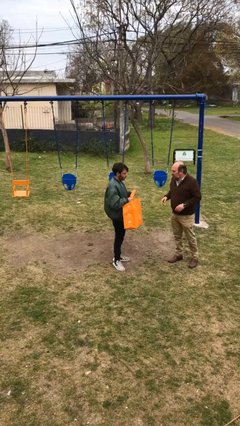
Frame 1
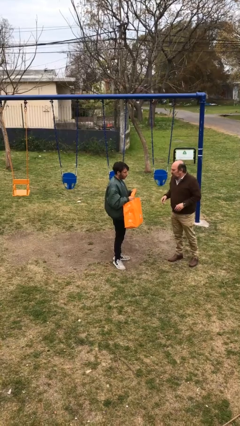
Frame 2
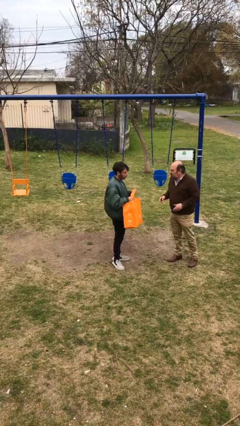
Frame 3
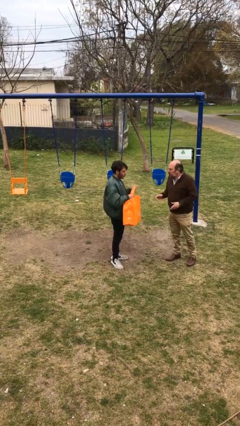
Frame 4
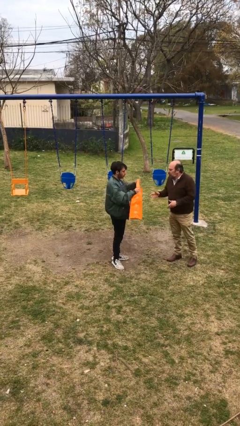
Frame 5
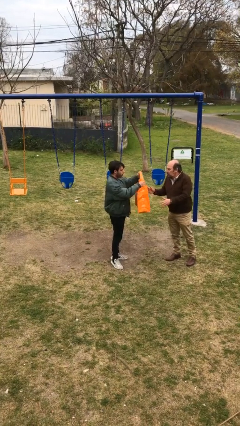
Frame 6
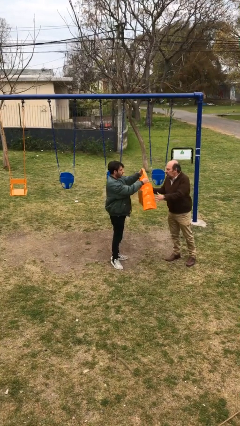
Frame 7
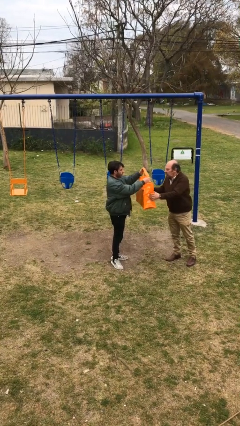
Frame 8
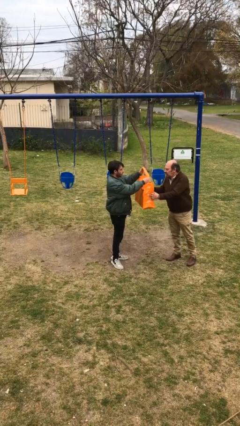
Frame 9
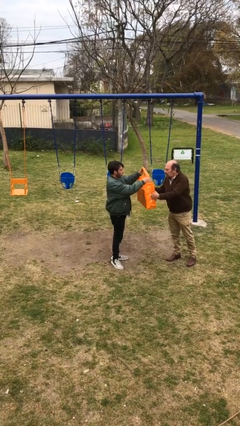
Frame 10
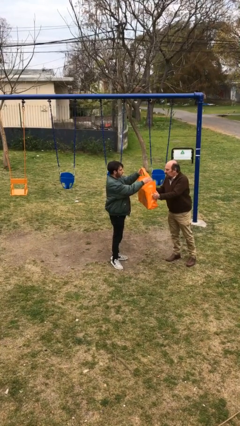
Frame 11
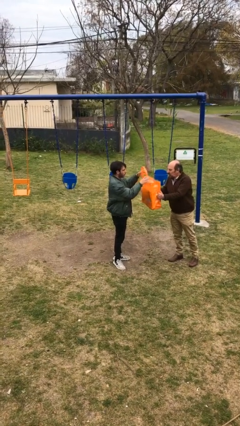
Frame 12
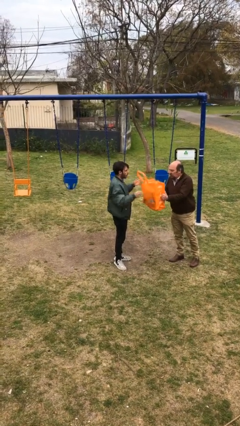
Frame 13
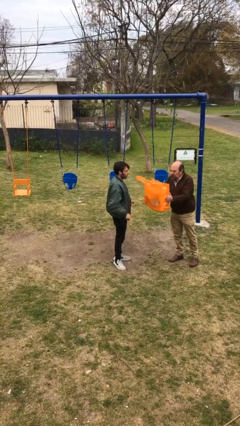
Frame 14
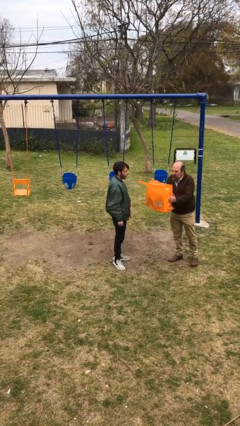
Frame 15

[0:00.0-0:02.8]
person transfers object to person

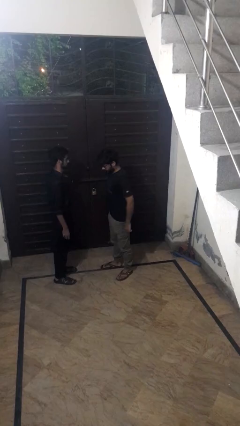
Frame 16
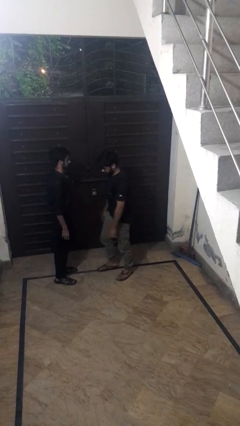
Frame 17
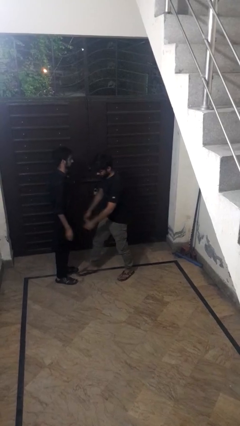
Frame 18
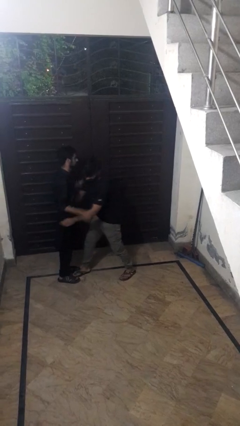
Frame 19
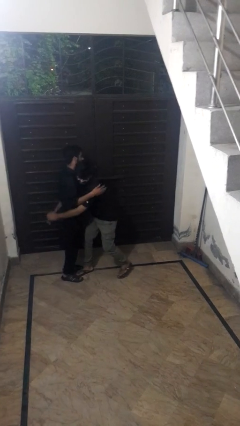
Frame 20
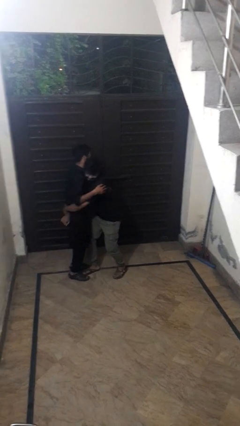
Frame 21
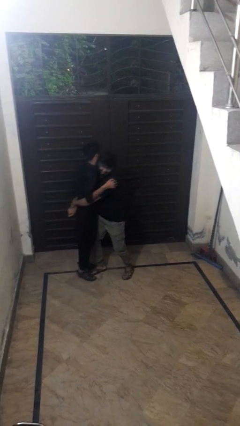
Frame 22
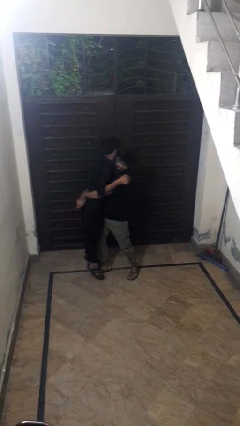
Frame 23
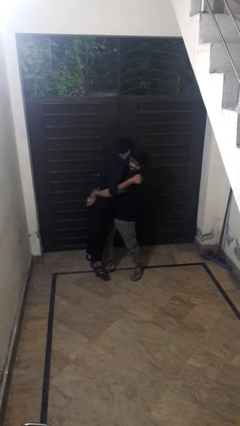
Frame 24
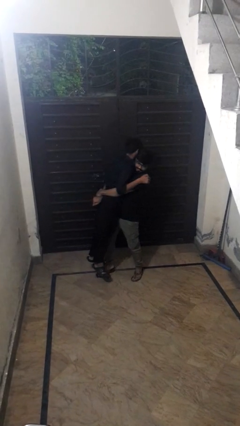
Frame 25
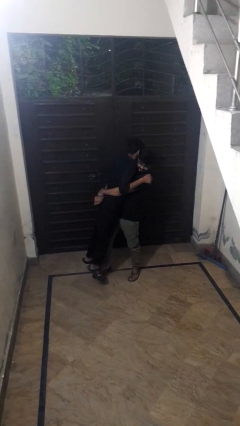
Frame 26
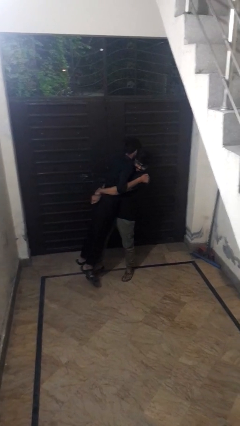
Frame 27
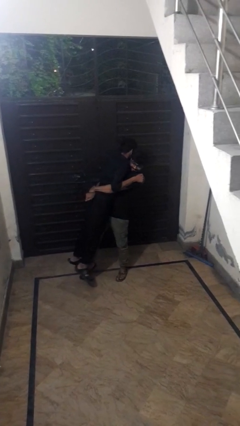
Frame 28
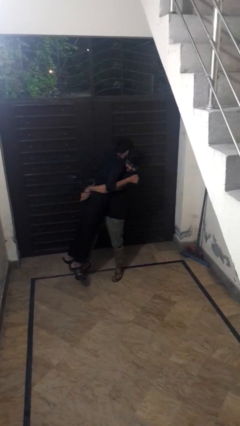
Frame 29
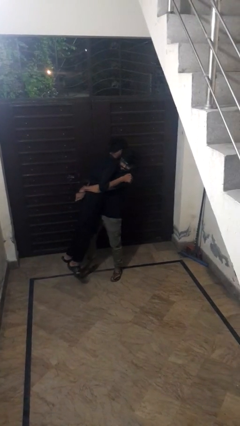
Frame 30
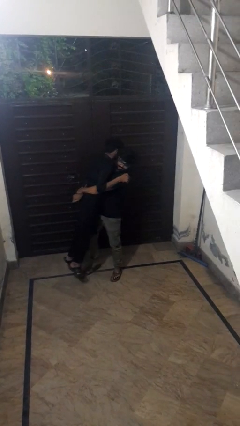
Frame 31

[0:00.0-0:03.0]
person picks up person

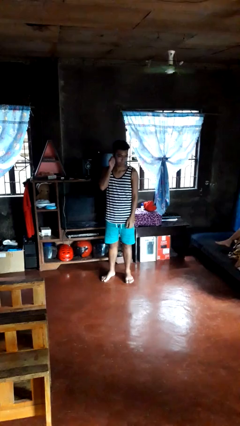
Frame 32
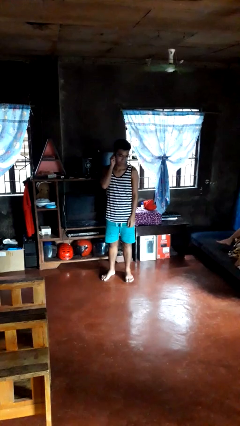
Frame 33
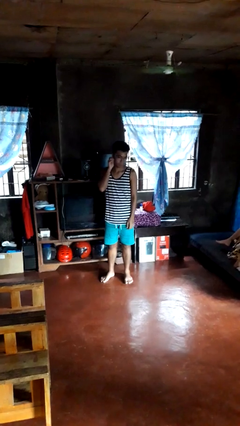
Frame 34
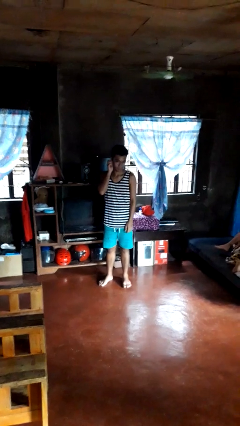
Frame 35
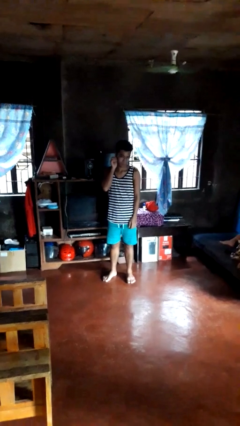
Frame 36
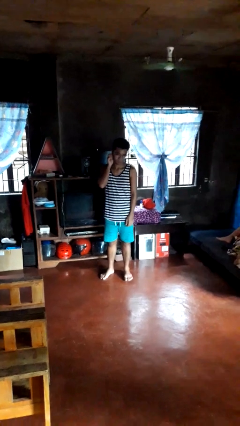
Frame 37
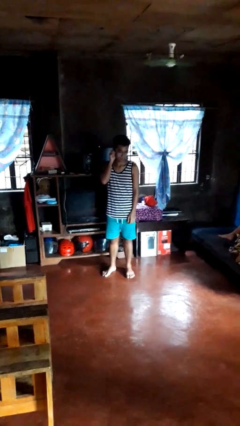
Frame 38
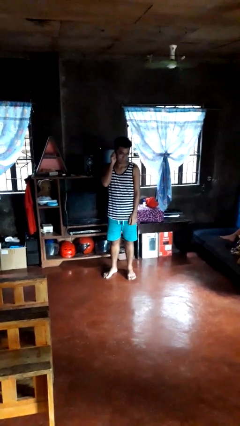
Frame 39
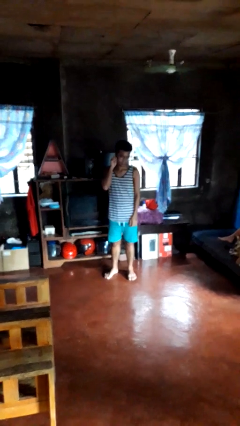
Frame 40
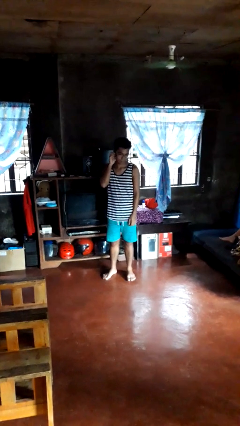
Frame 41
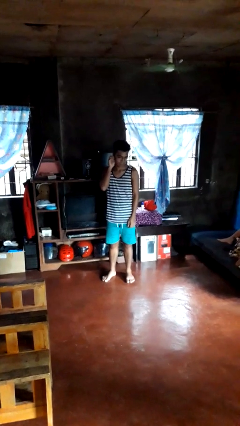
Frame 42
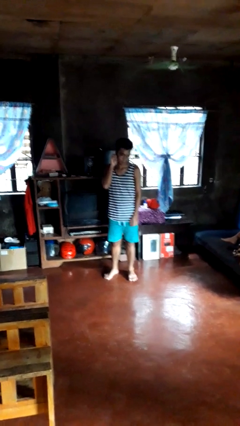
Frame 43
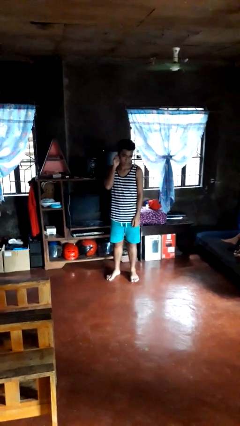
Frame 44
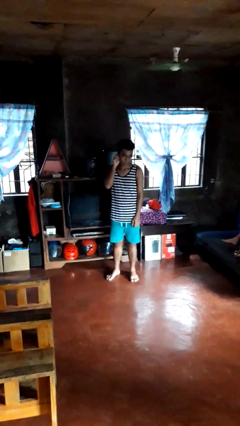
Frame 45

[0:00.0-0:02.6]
person touches earlobe

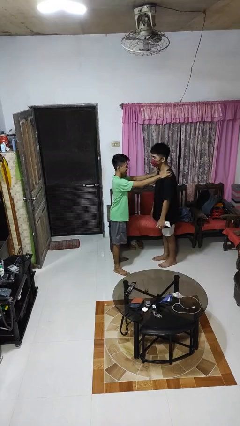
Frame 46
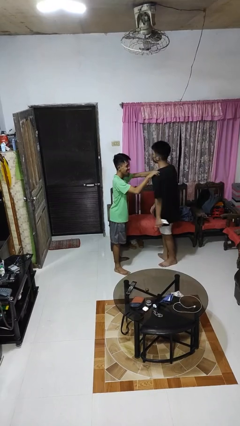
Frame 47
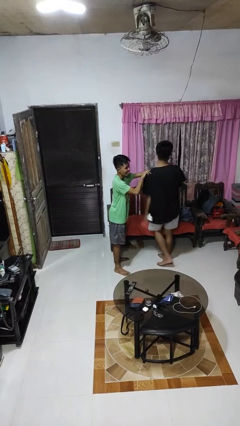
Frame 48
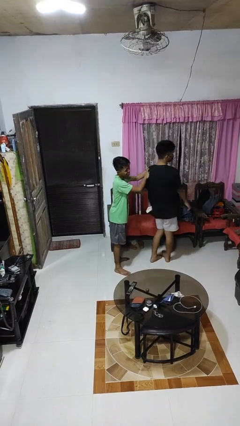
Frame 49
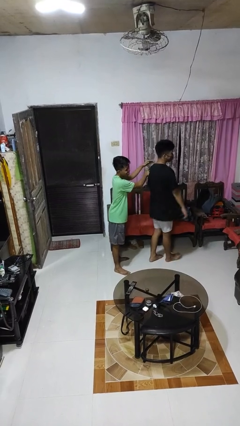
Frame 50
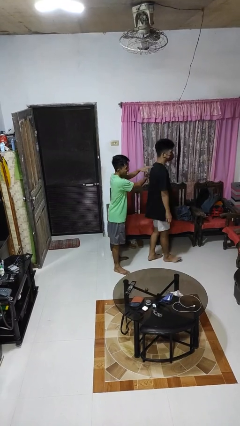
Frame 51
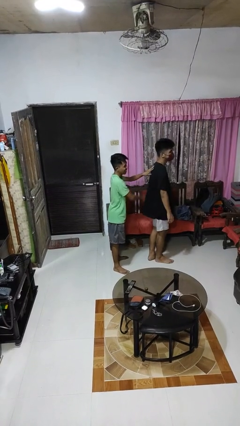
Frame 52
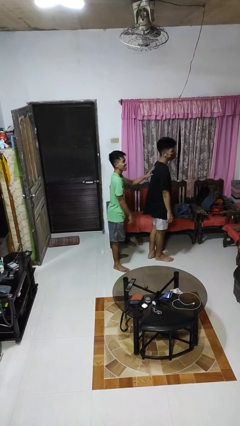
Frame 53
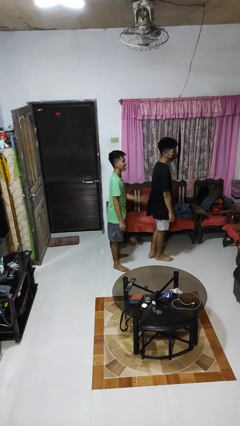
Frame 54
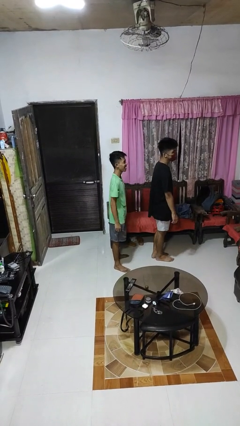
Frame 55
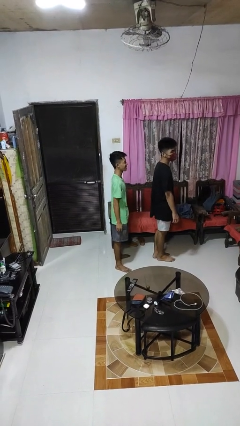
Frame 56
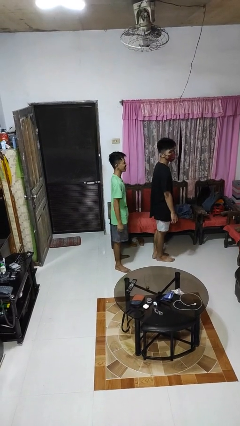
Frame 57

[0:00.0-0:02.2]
person spins person around

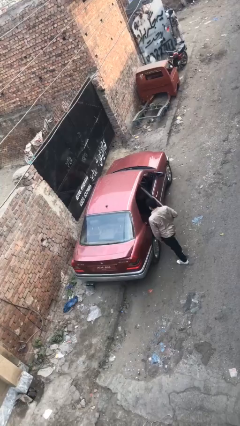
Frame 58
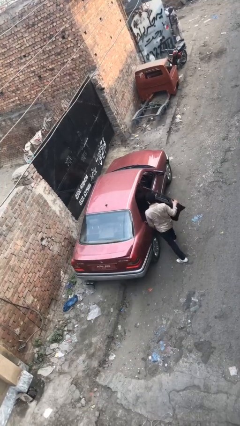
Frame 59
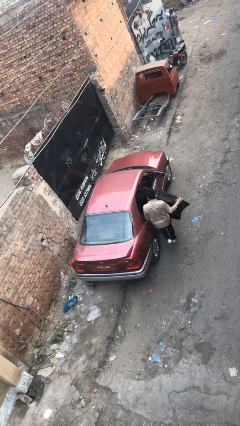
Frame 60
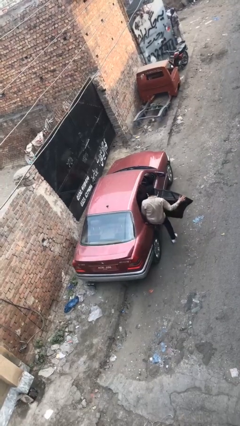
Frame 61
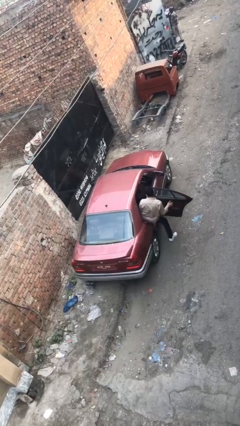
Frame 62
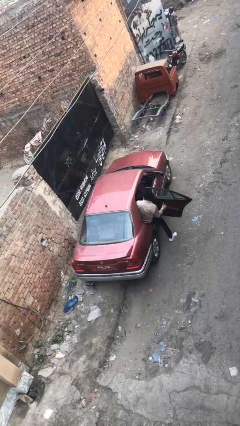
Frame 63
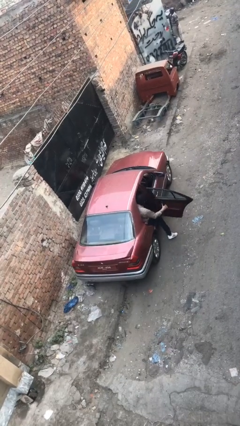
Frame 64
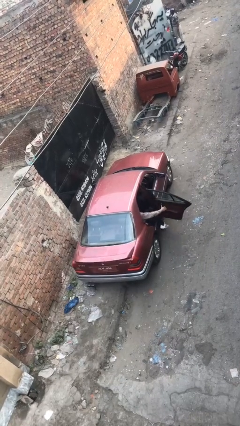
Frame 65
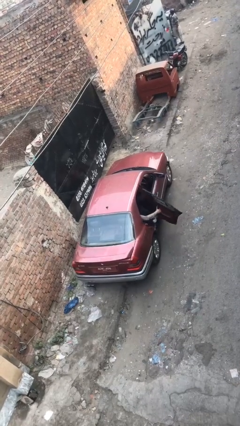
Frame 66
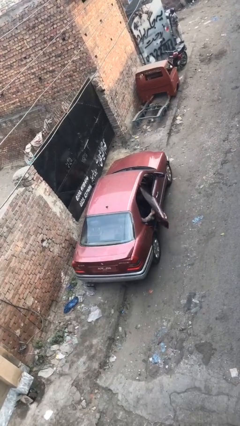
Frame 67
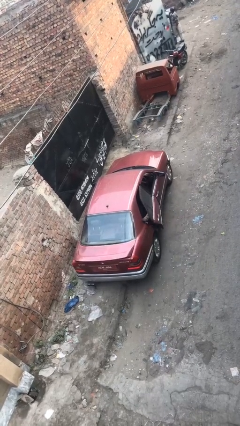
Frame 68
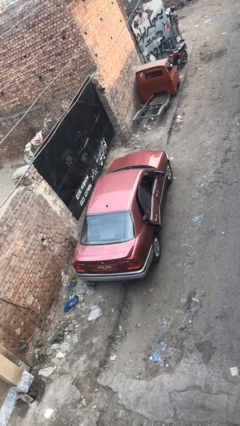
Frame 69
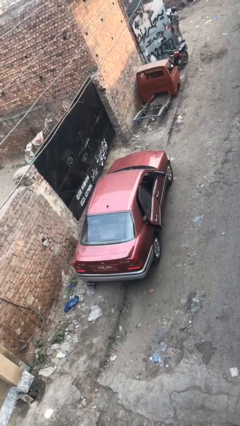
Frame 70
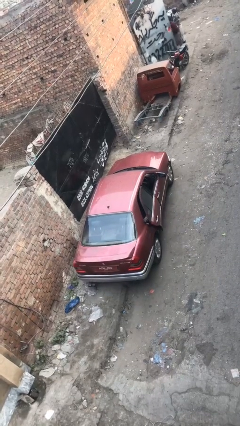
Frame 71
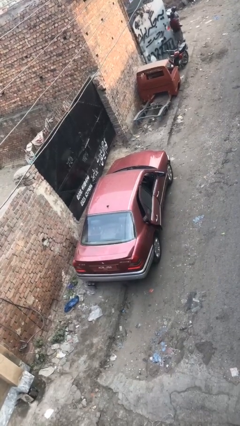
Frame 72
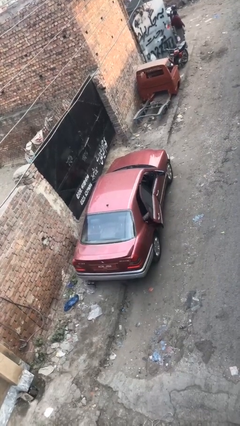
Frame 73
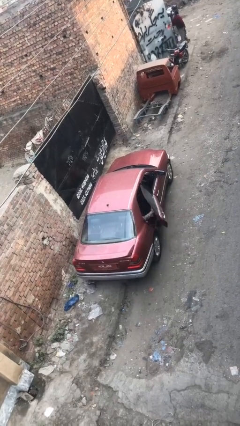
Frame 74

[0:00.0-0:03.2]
car picks up person

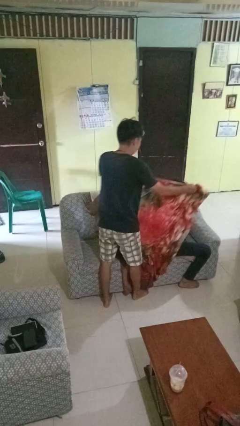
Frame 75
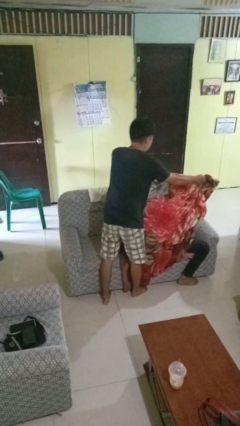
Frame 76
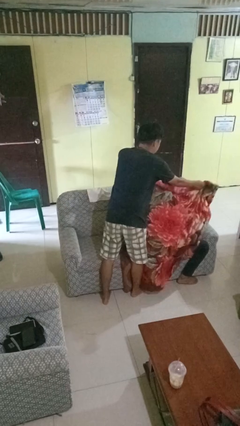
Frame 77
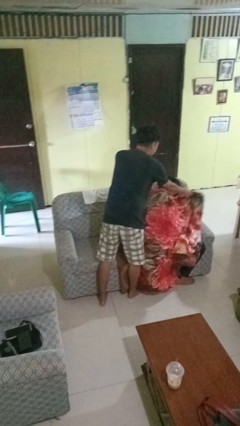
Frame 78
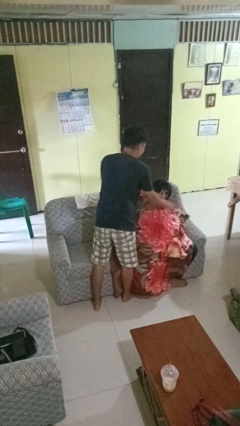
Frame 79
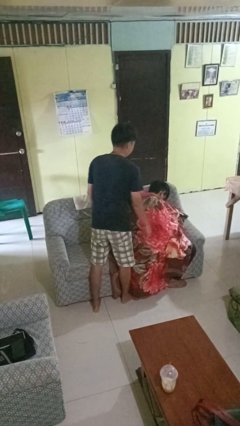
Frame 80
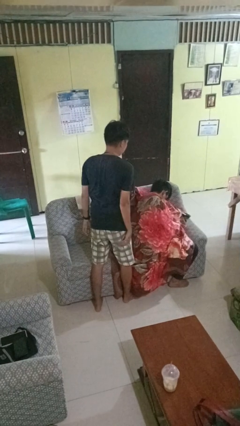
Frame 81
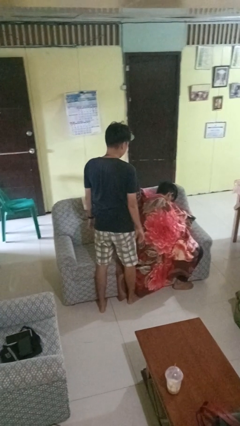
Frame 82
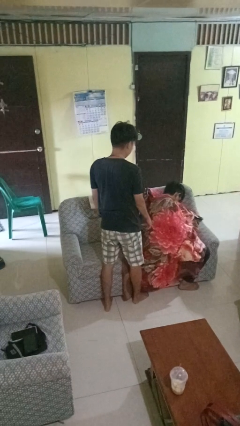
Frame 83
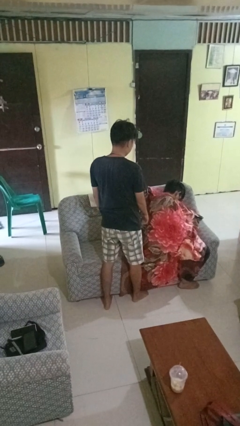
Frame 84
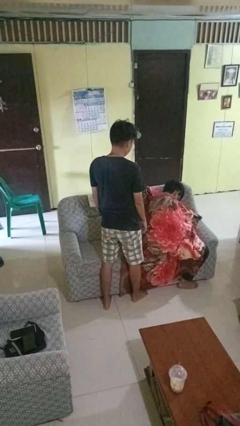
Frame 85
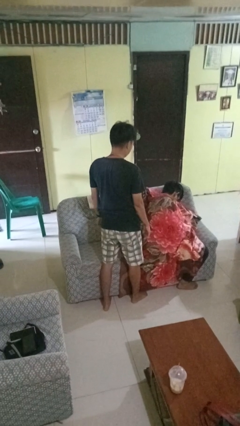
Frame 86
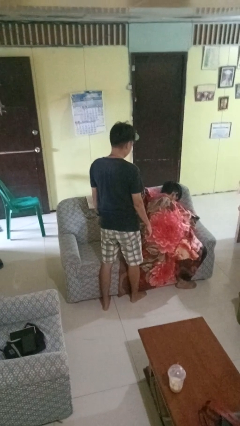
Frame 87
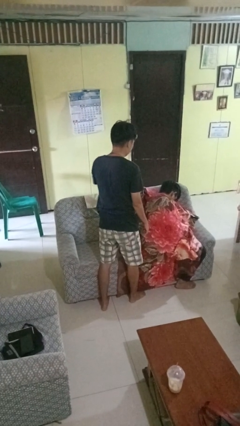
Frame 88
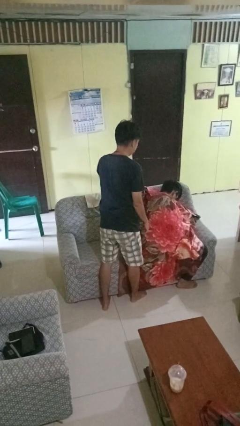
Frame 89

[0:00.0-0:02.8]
person covers friend with blanket

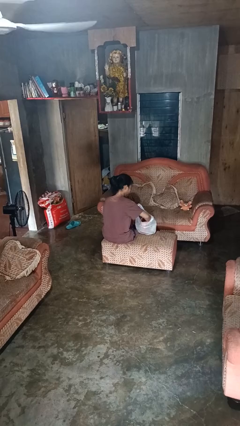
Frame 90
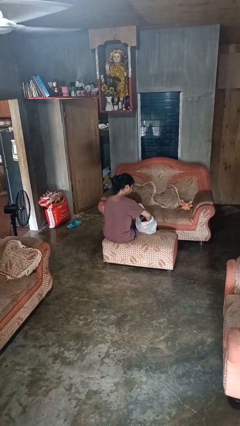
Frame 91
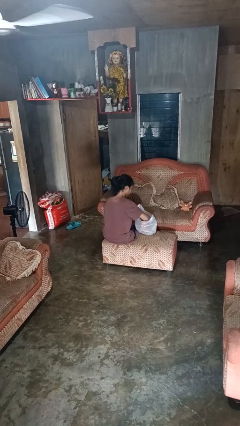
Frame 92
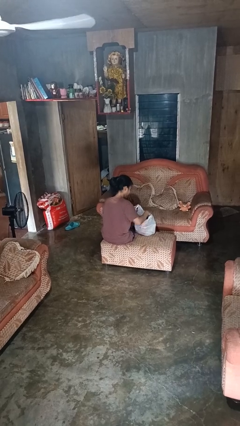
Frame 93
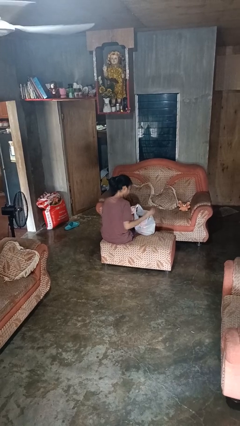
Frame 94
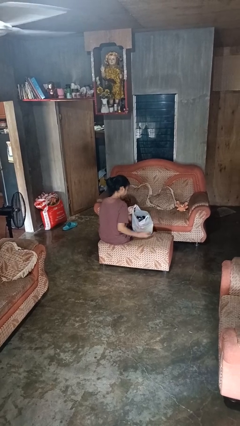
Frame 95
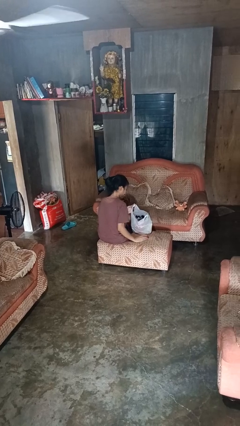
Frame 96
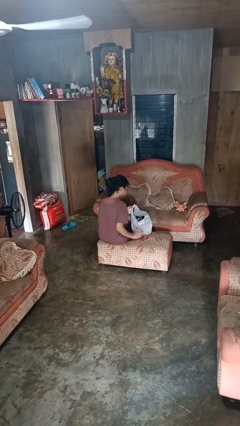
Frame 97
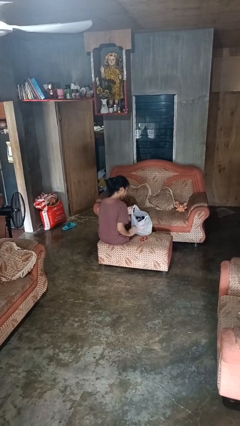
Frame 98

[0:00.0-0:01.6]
person takes object from bag
